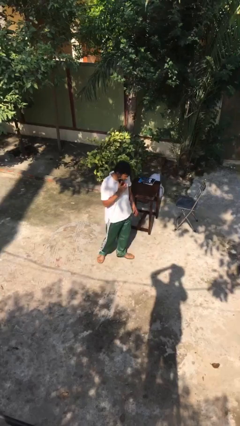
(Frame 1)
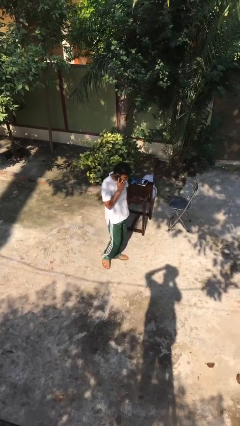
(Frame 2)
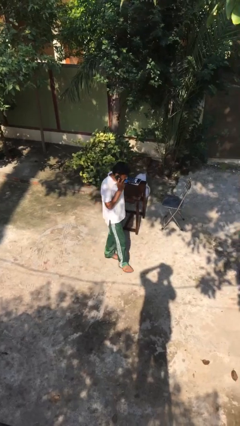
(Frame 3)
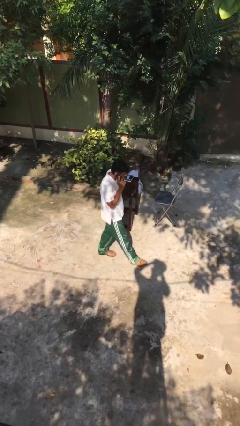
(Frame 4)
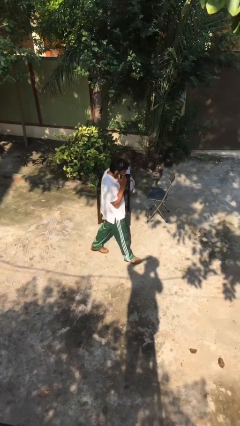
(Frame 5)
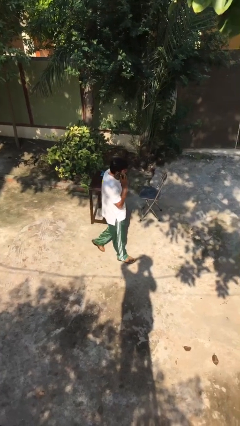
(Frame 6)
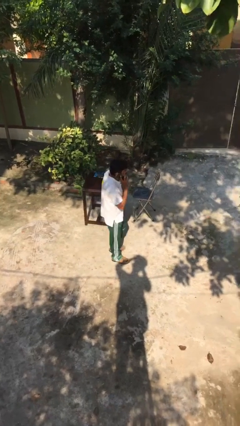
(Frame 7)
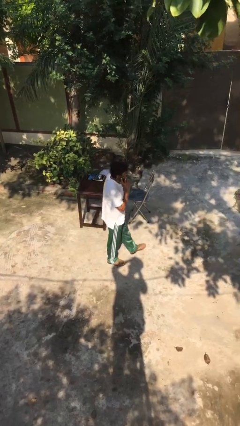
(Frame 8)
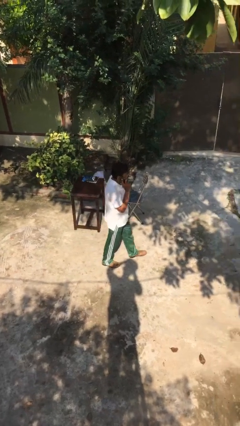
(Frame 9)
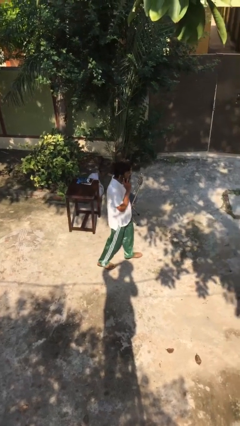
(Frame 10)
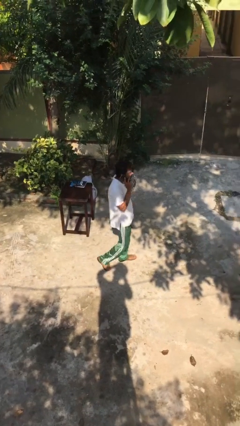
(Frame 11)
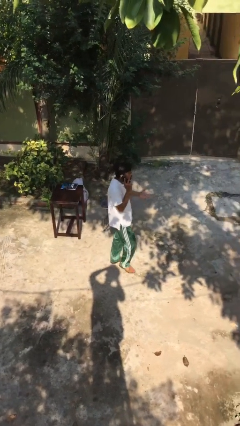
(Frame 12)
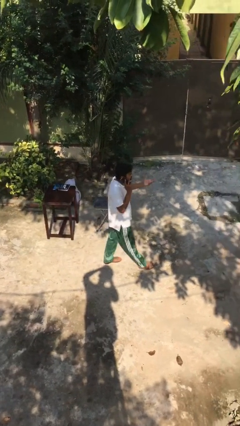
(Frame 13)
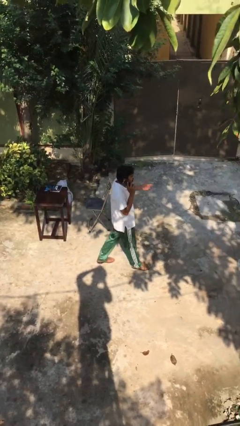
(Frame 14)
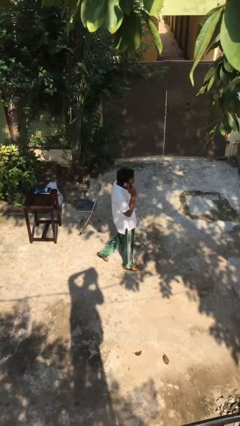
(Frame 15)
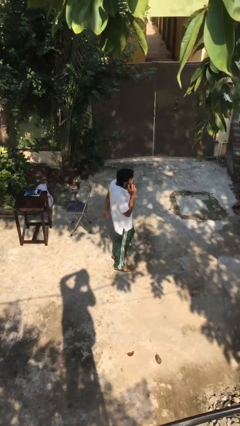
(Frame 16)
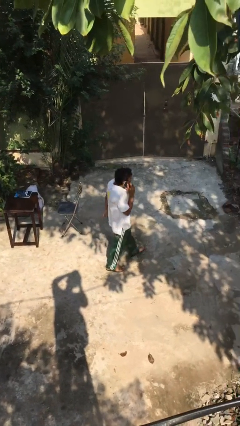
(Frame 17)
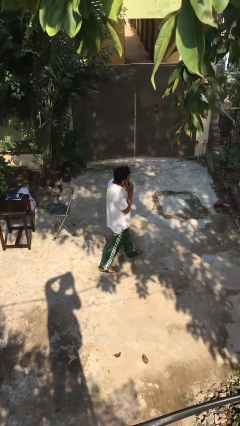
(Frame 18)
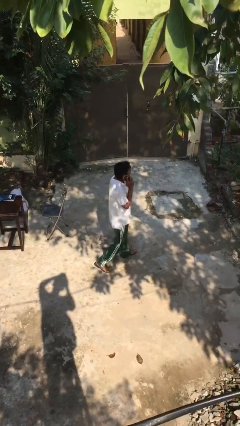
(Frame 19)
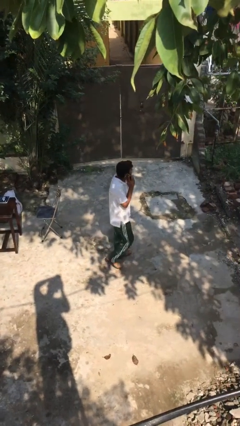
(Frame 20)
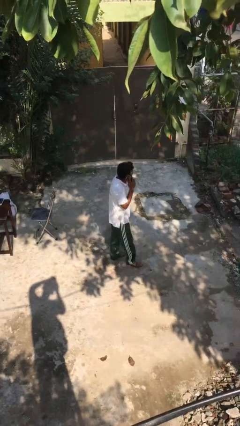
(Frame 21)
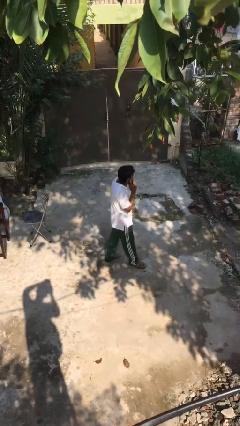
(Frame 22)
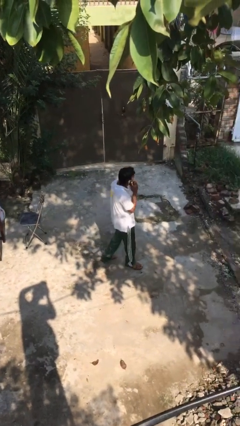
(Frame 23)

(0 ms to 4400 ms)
person talks on phone

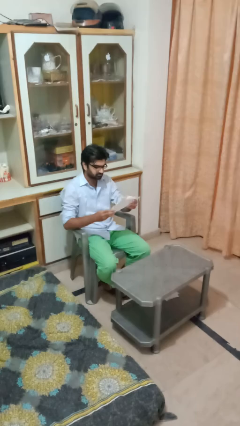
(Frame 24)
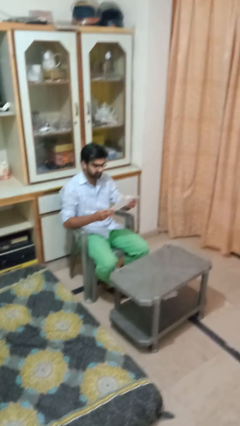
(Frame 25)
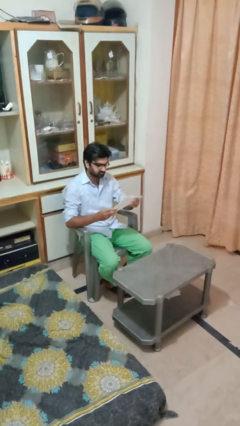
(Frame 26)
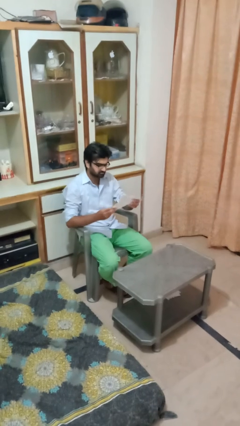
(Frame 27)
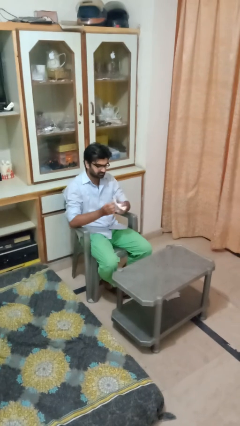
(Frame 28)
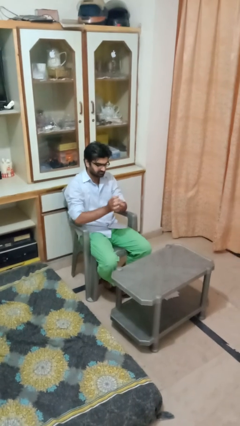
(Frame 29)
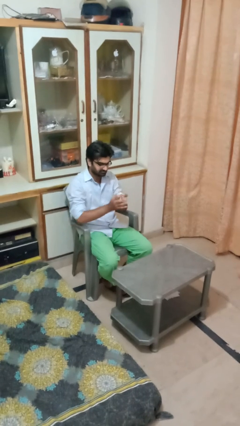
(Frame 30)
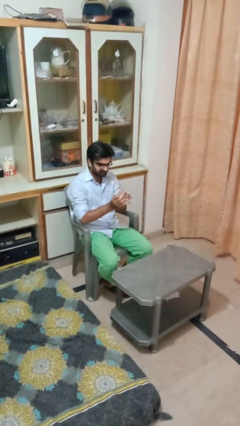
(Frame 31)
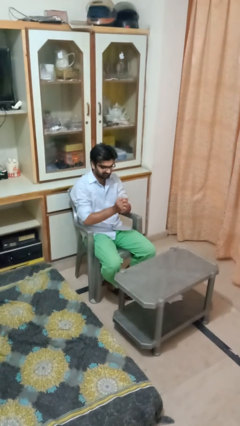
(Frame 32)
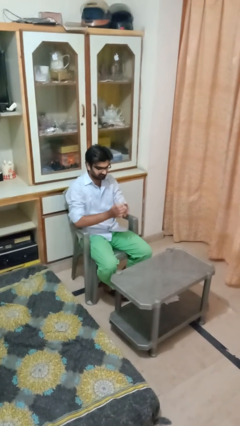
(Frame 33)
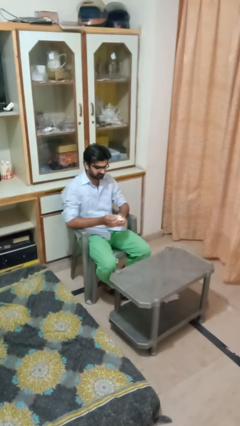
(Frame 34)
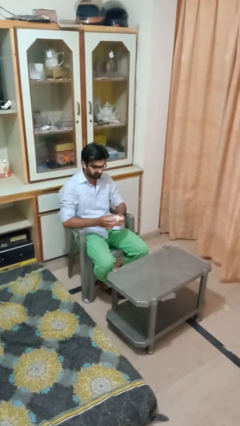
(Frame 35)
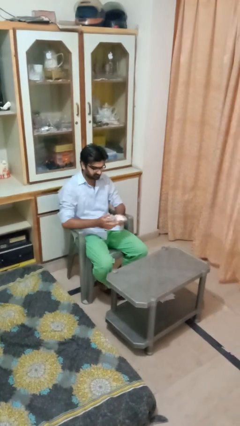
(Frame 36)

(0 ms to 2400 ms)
person crumples paper

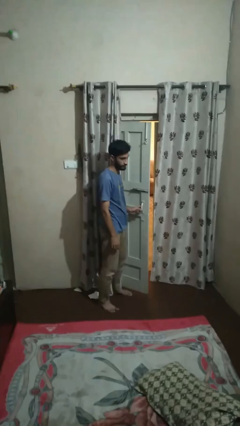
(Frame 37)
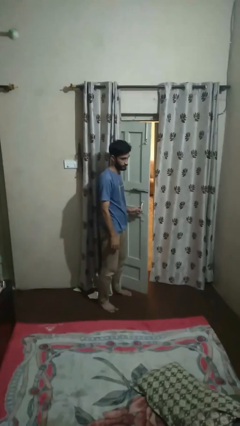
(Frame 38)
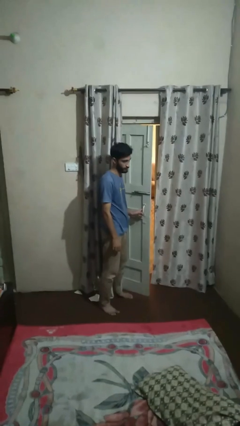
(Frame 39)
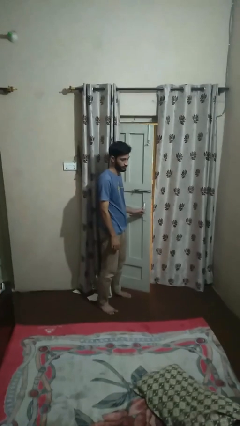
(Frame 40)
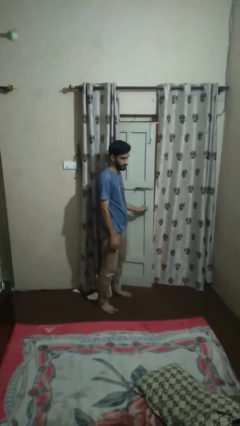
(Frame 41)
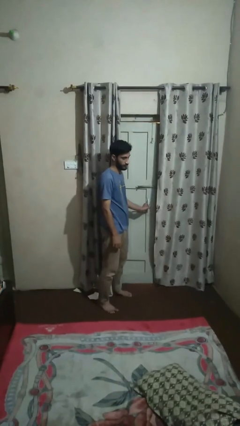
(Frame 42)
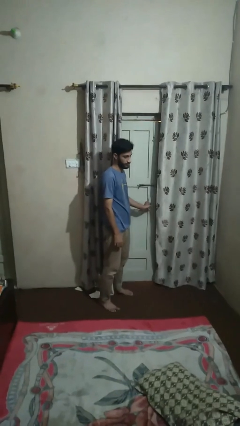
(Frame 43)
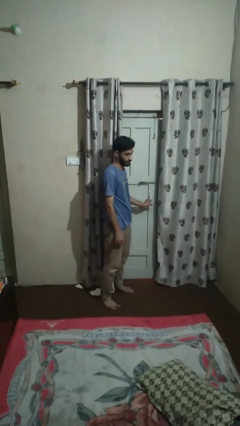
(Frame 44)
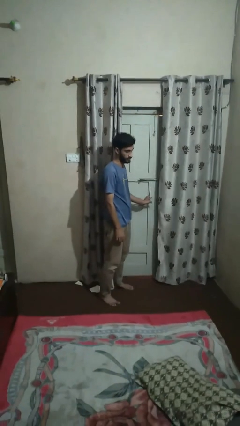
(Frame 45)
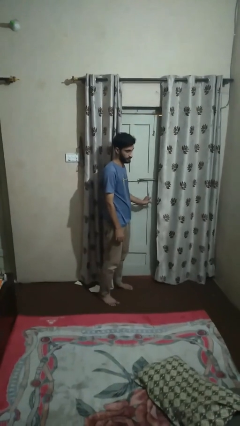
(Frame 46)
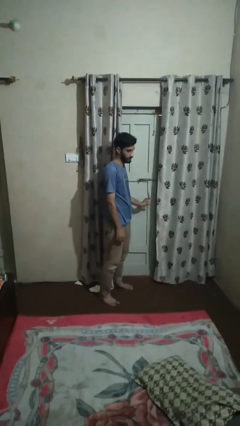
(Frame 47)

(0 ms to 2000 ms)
person closes facility door

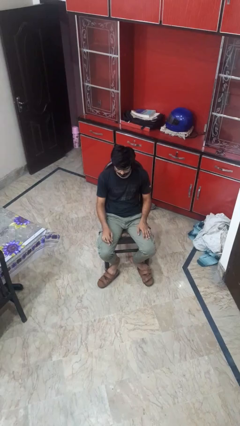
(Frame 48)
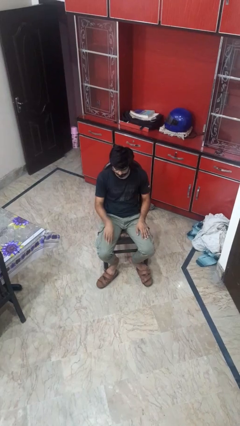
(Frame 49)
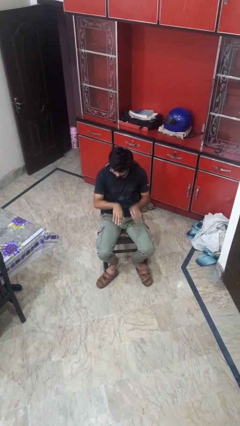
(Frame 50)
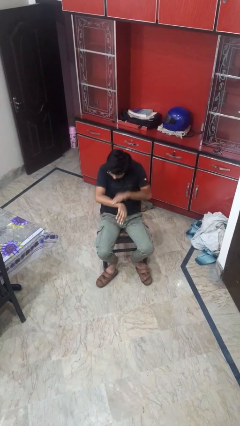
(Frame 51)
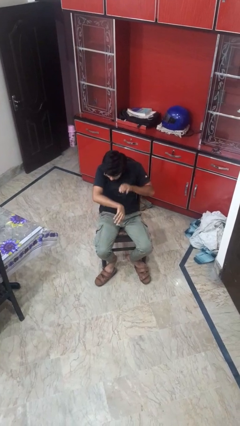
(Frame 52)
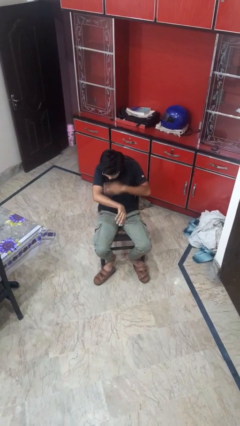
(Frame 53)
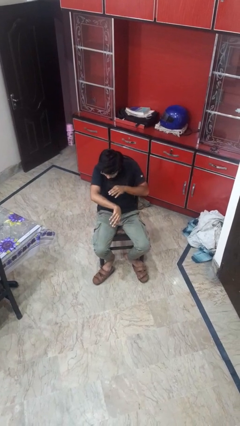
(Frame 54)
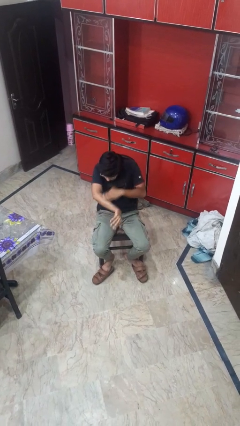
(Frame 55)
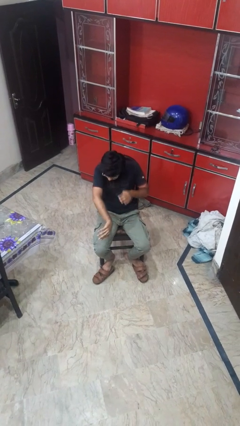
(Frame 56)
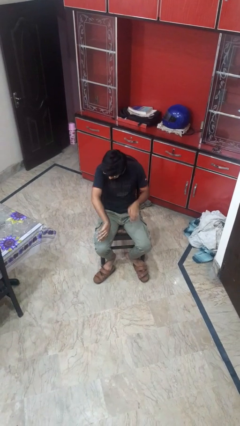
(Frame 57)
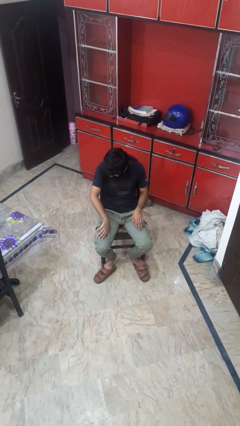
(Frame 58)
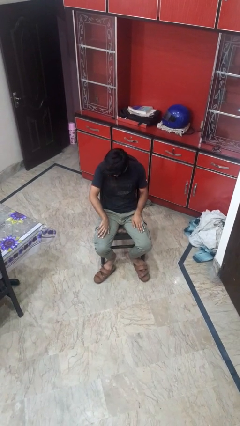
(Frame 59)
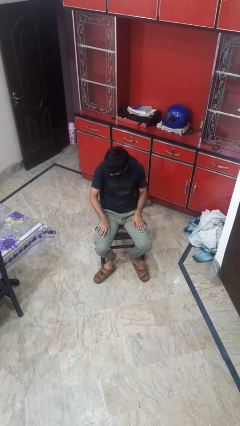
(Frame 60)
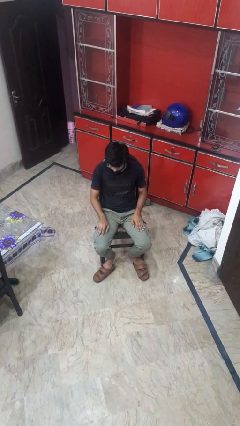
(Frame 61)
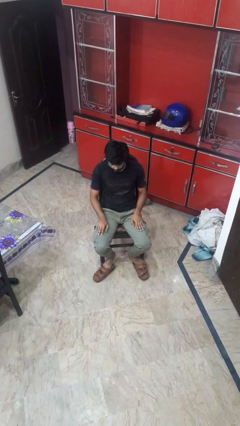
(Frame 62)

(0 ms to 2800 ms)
person swats bug

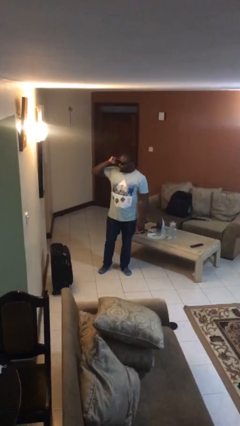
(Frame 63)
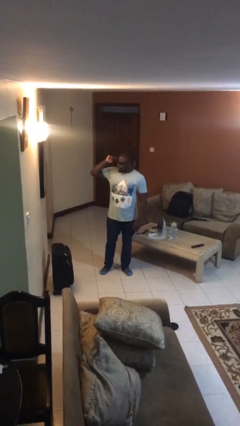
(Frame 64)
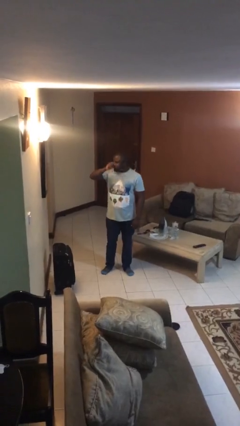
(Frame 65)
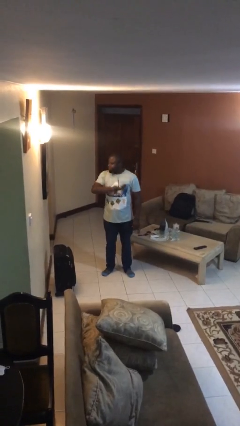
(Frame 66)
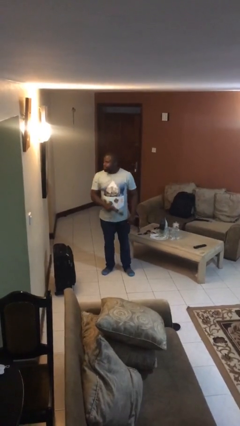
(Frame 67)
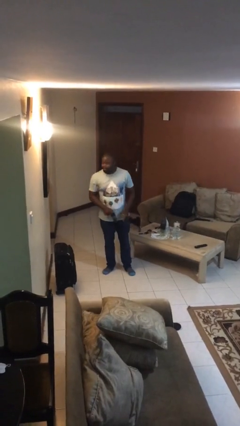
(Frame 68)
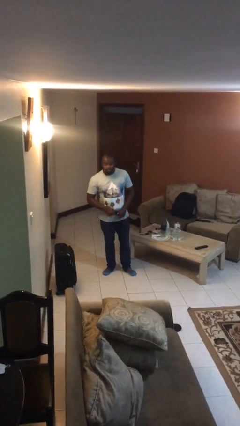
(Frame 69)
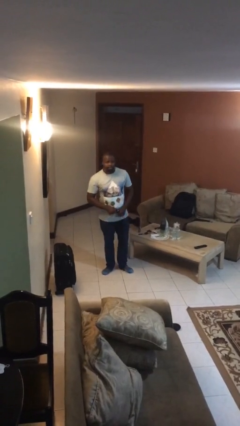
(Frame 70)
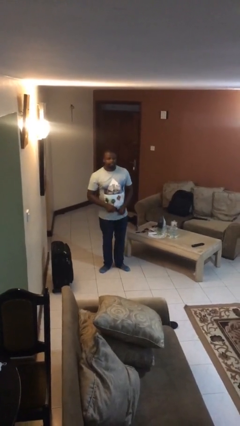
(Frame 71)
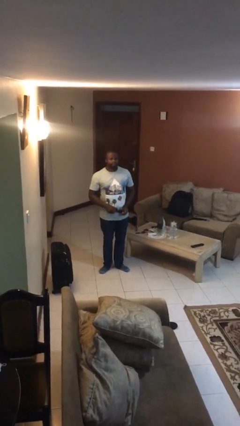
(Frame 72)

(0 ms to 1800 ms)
person takes off sunglasses

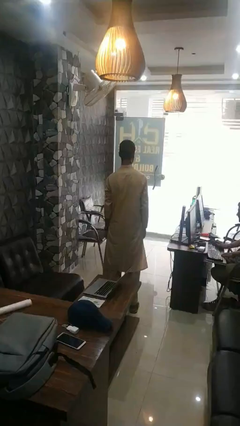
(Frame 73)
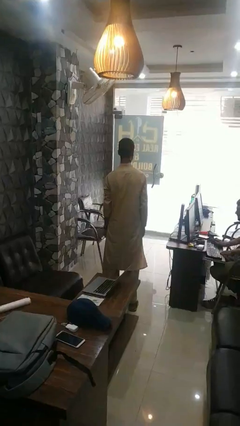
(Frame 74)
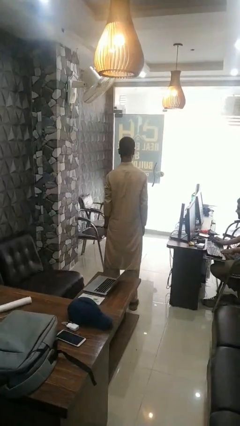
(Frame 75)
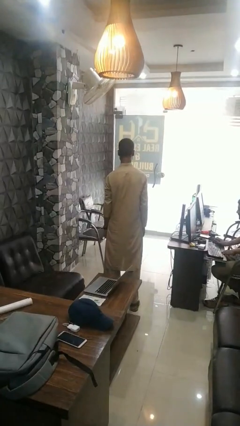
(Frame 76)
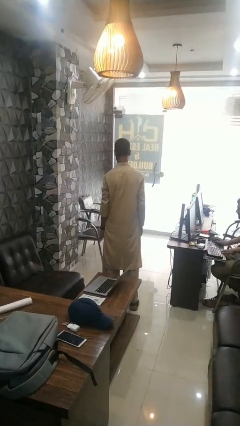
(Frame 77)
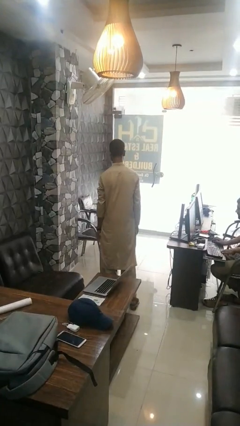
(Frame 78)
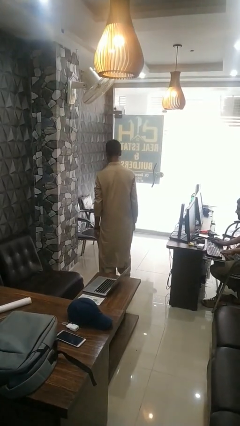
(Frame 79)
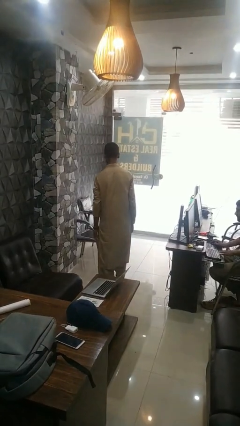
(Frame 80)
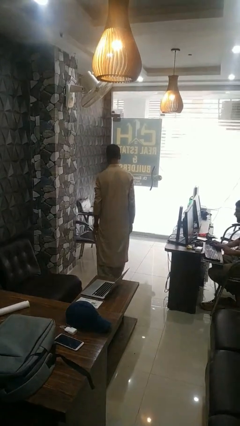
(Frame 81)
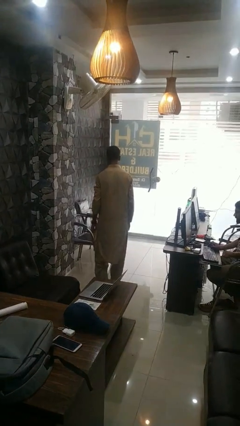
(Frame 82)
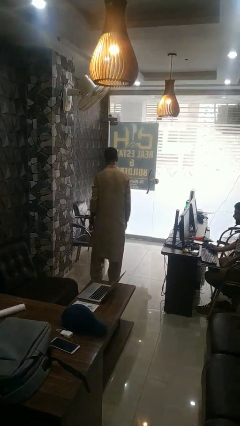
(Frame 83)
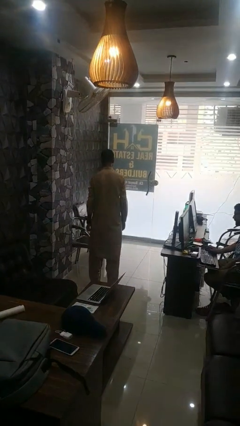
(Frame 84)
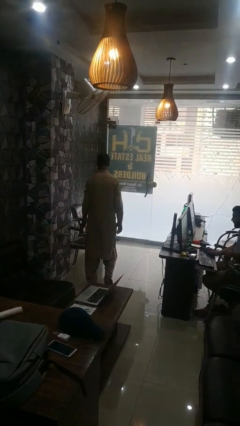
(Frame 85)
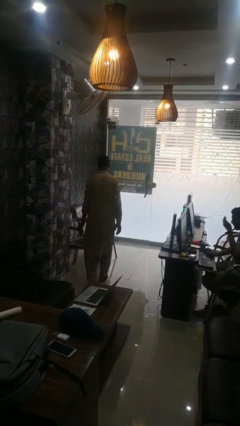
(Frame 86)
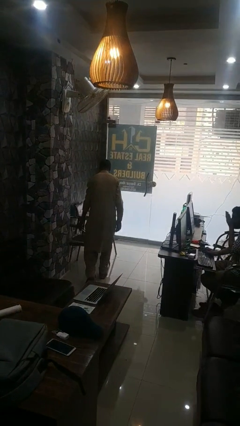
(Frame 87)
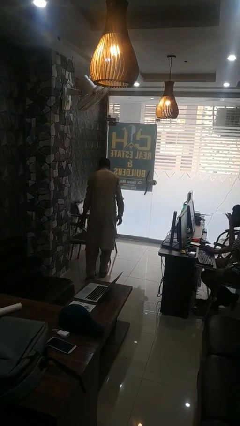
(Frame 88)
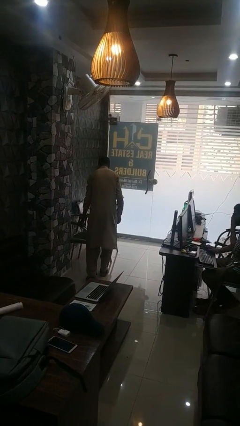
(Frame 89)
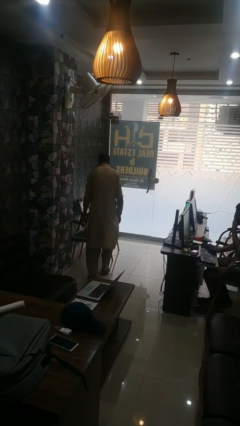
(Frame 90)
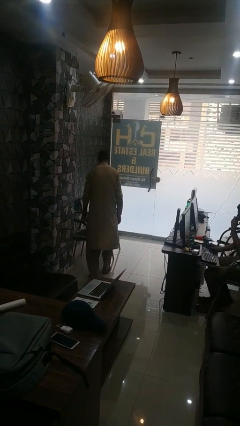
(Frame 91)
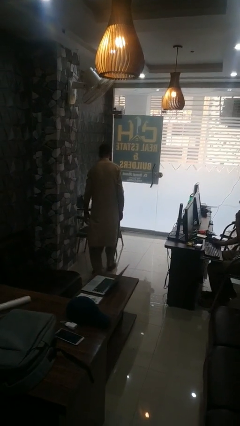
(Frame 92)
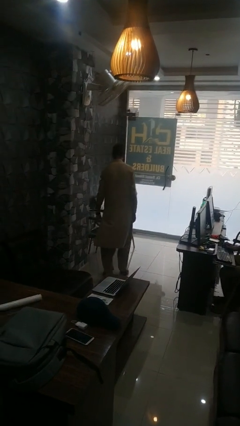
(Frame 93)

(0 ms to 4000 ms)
person stubs toe

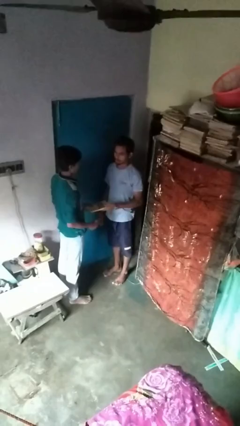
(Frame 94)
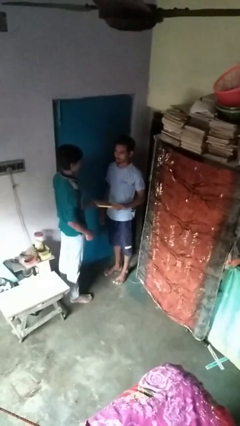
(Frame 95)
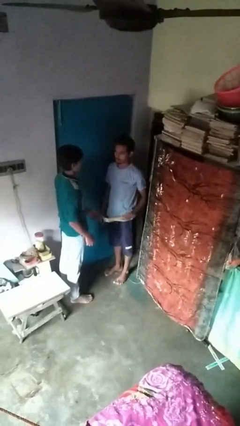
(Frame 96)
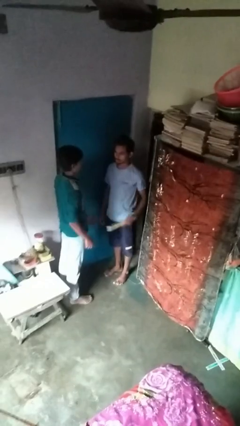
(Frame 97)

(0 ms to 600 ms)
person transfers object to person
